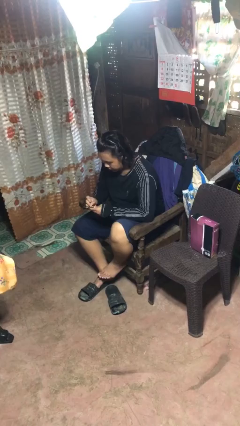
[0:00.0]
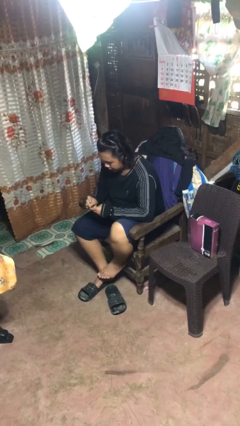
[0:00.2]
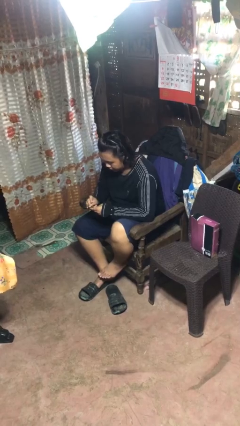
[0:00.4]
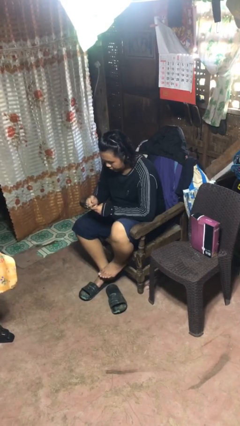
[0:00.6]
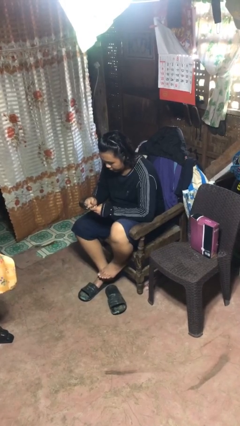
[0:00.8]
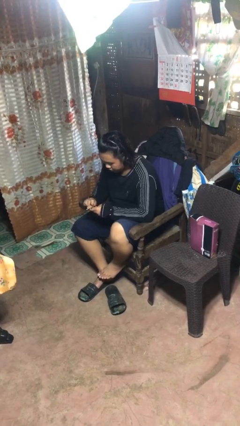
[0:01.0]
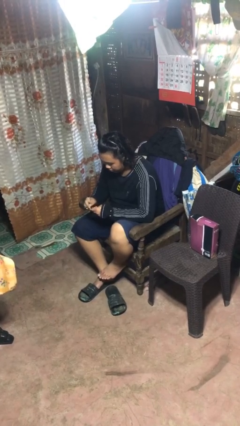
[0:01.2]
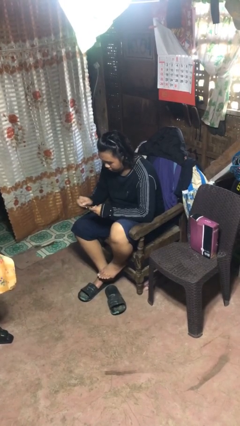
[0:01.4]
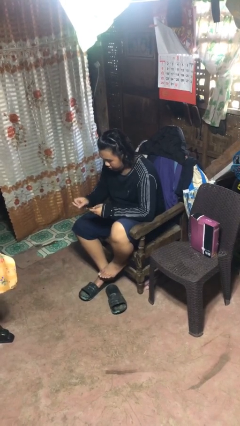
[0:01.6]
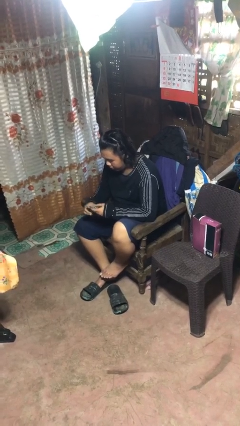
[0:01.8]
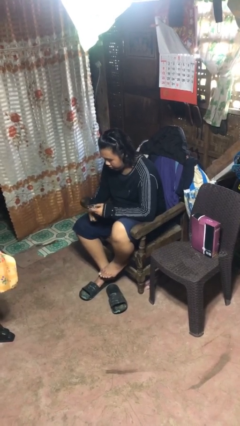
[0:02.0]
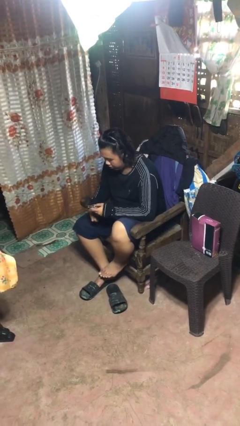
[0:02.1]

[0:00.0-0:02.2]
person files fingernails

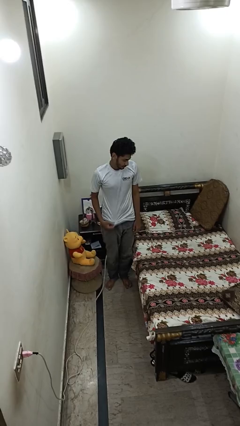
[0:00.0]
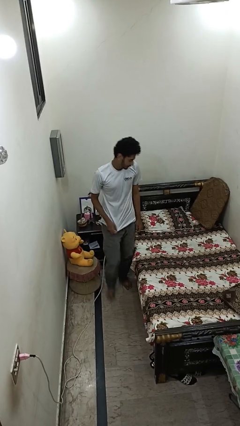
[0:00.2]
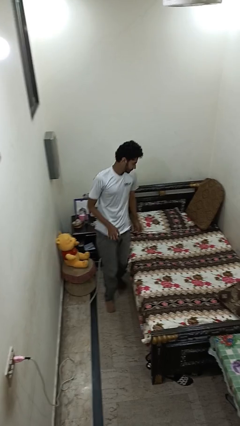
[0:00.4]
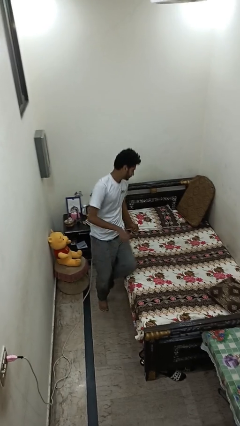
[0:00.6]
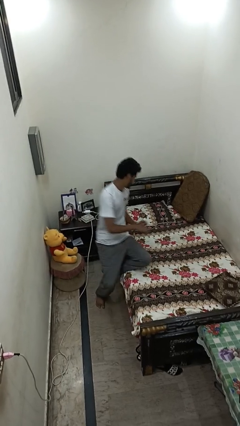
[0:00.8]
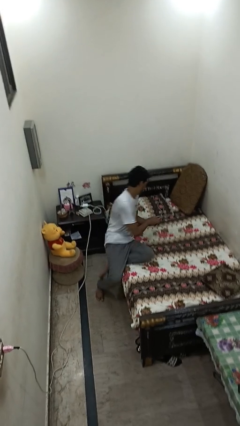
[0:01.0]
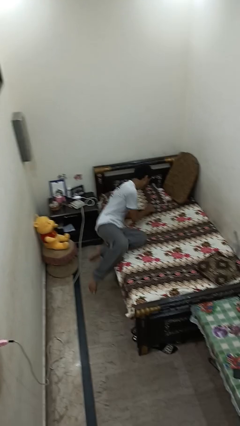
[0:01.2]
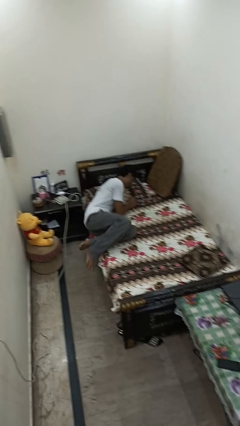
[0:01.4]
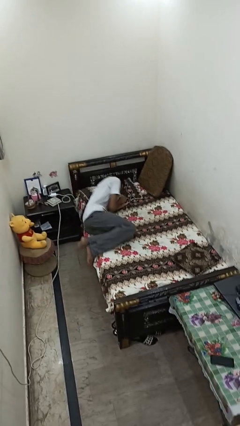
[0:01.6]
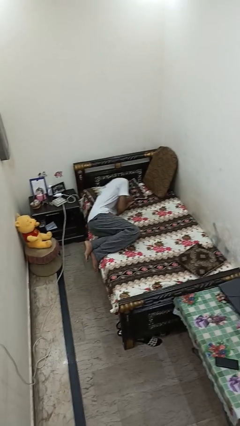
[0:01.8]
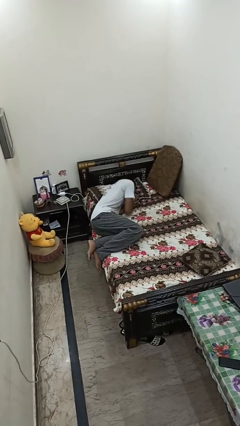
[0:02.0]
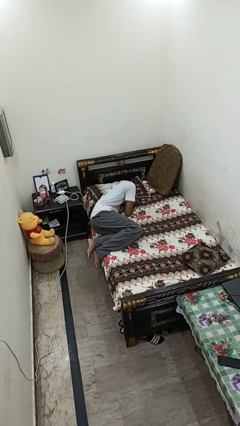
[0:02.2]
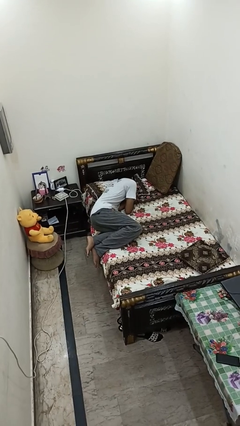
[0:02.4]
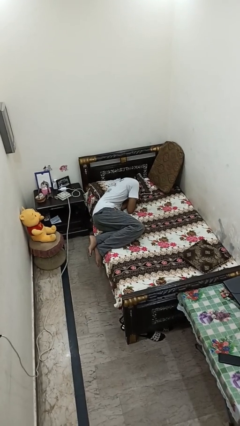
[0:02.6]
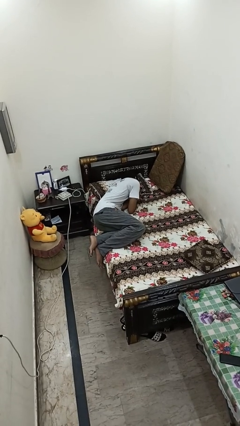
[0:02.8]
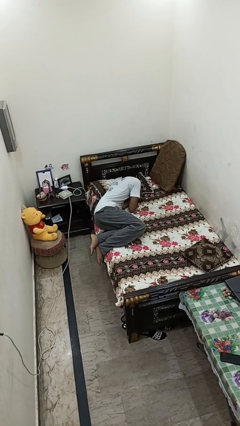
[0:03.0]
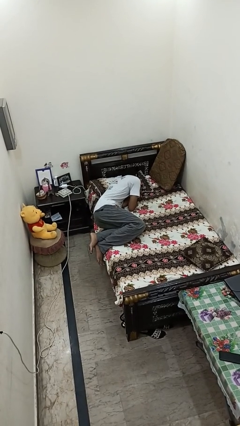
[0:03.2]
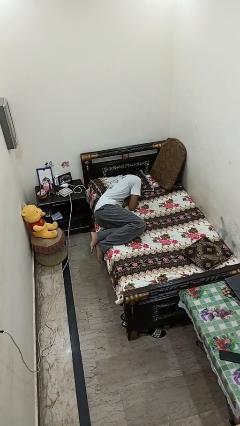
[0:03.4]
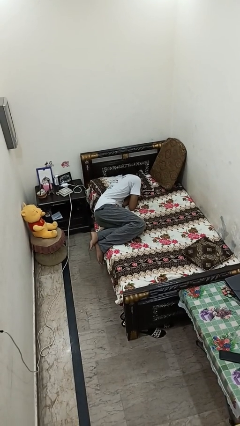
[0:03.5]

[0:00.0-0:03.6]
person lies down on bed

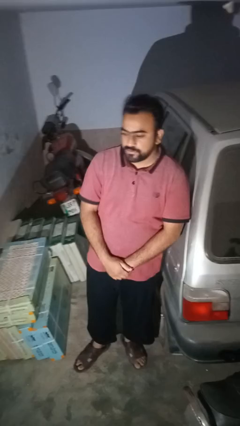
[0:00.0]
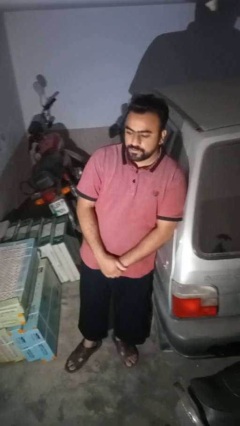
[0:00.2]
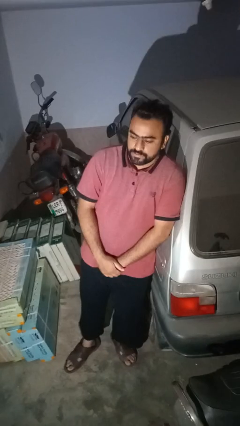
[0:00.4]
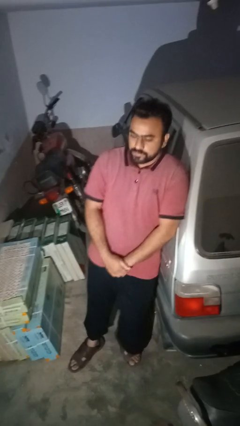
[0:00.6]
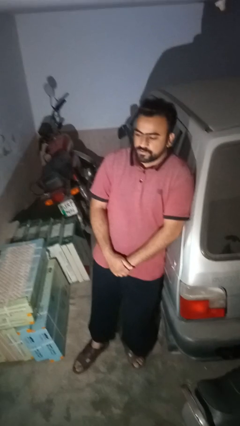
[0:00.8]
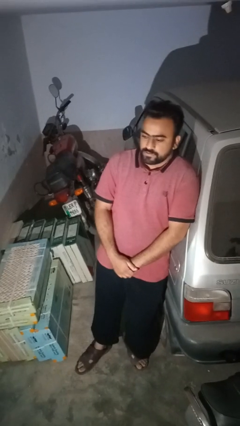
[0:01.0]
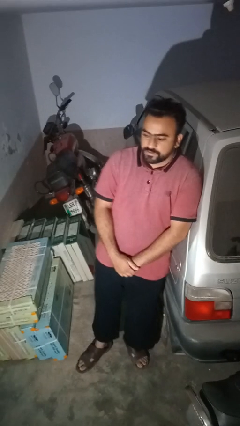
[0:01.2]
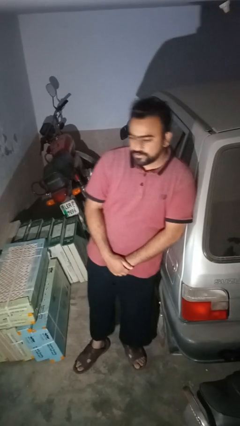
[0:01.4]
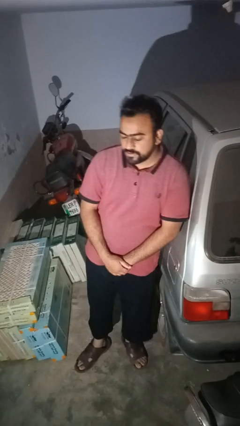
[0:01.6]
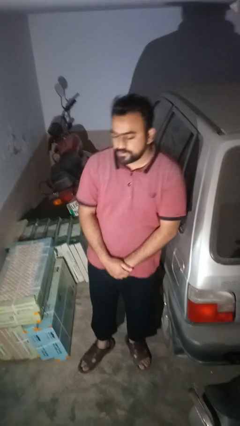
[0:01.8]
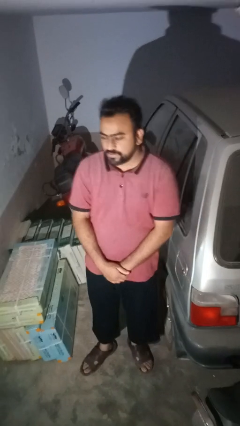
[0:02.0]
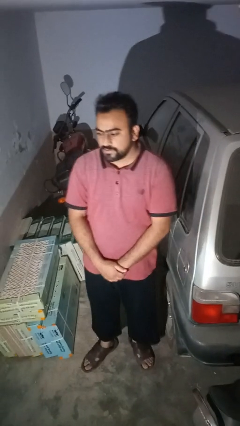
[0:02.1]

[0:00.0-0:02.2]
person leans against car

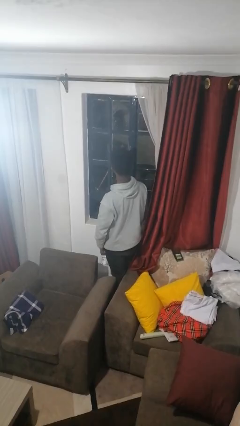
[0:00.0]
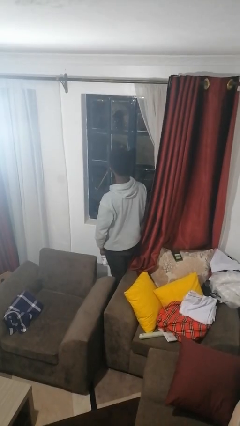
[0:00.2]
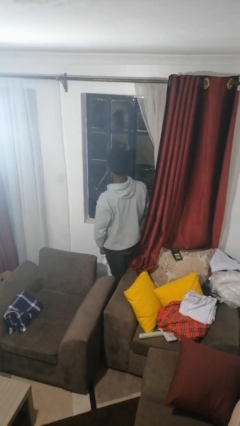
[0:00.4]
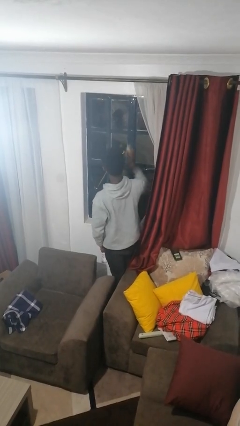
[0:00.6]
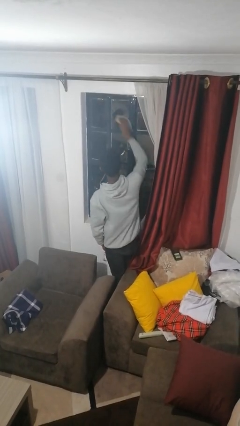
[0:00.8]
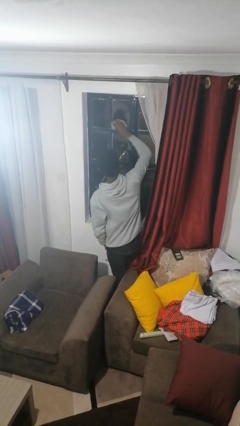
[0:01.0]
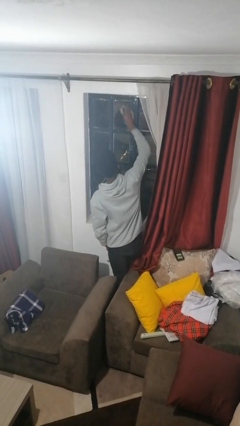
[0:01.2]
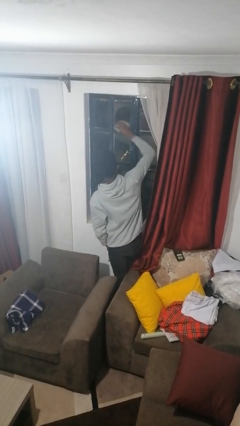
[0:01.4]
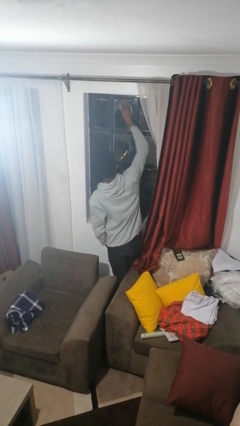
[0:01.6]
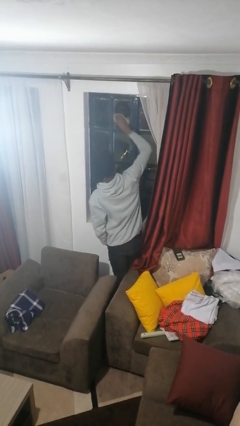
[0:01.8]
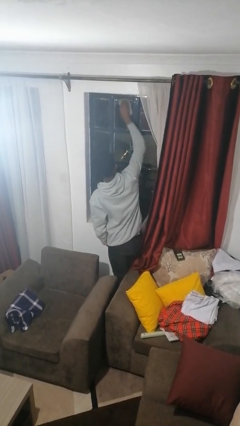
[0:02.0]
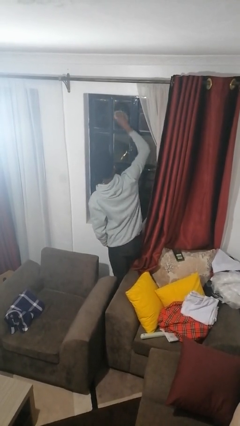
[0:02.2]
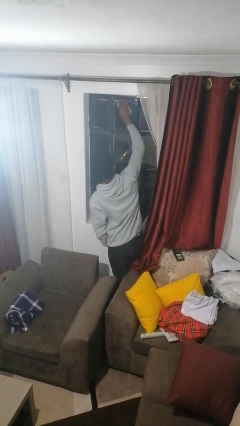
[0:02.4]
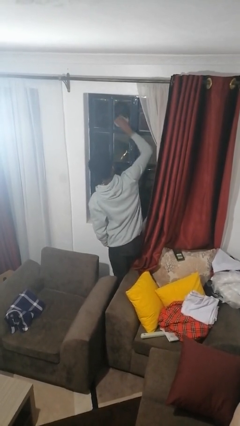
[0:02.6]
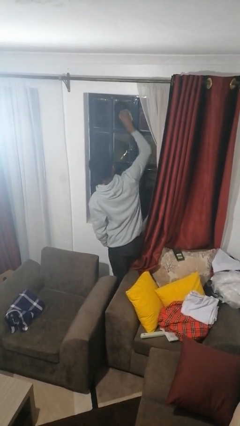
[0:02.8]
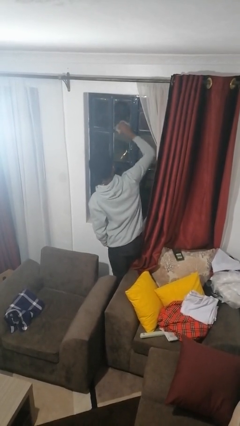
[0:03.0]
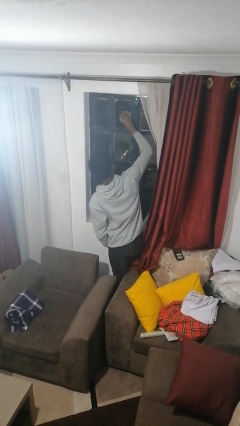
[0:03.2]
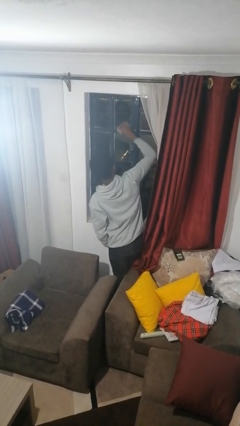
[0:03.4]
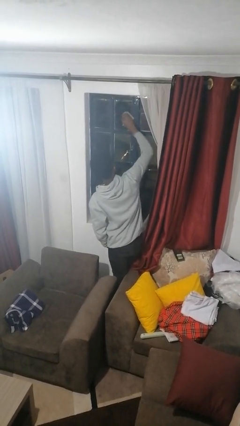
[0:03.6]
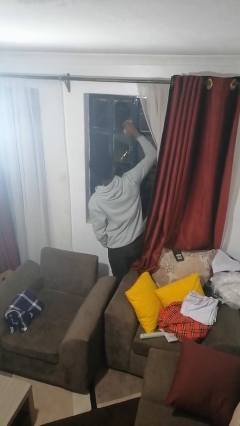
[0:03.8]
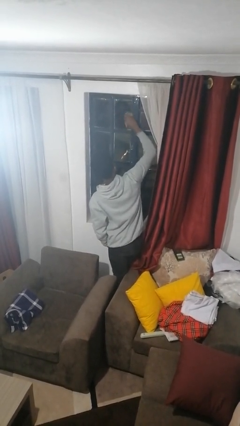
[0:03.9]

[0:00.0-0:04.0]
person washes window

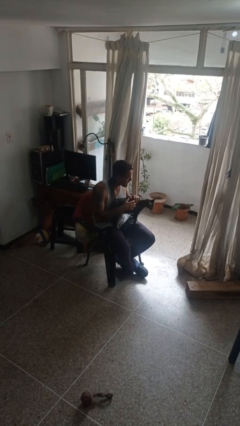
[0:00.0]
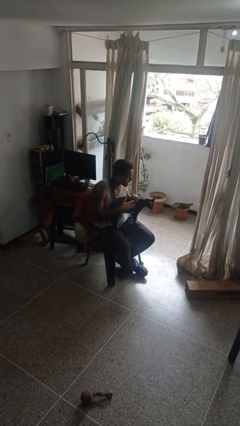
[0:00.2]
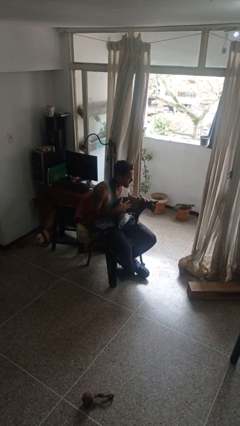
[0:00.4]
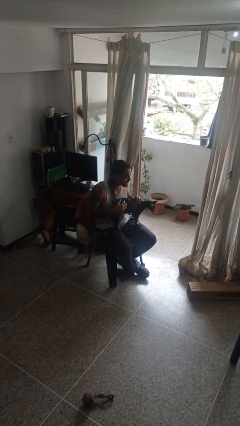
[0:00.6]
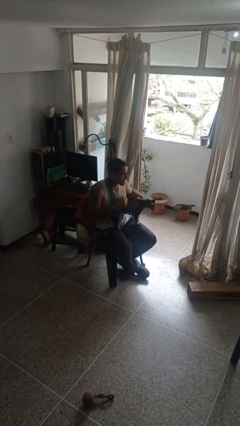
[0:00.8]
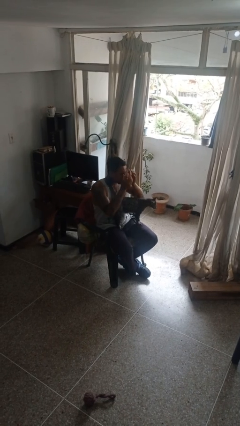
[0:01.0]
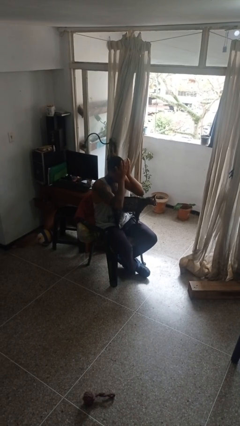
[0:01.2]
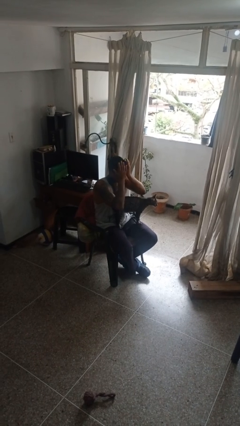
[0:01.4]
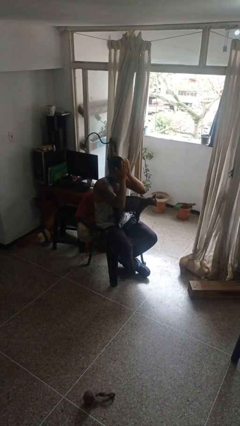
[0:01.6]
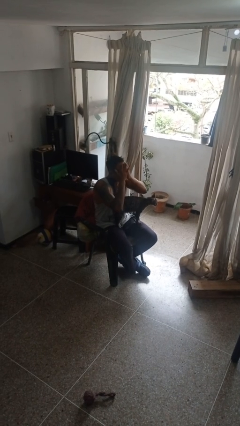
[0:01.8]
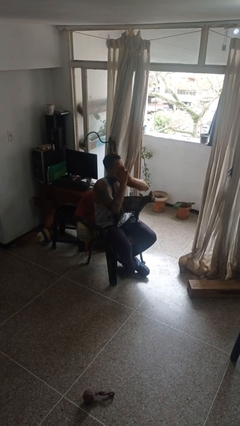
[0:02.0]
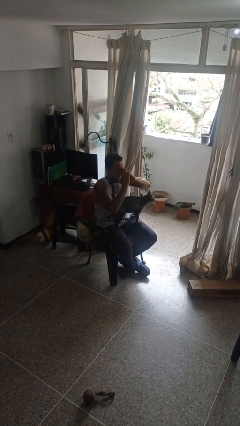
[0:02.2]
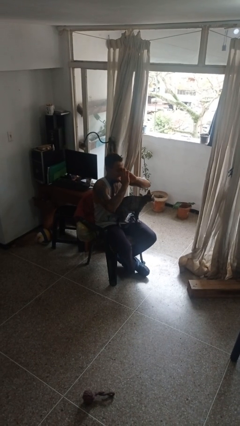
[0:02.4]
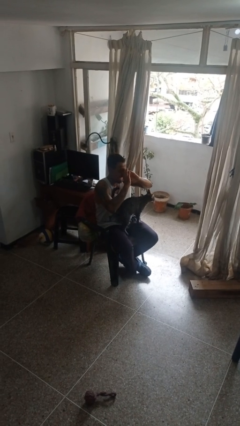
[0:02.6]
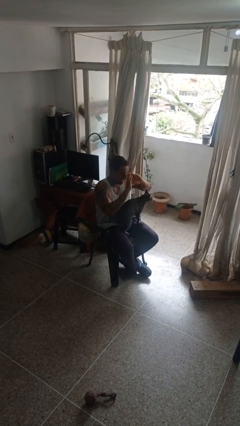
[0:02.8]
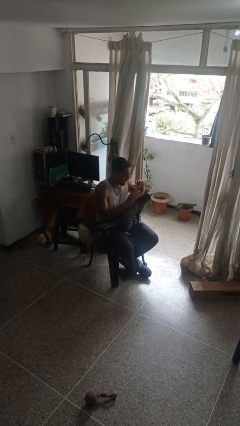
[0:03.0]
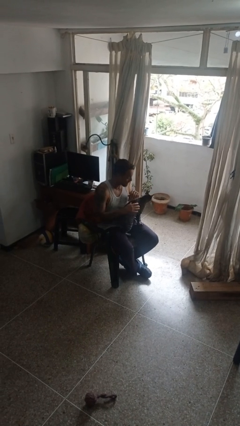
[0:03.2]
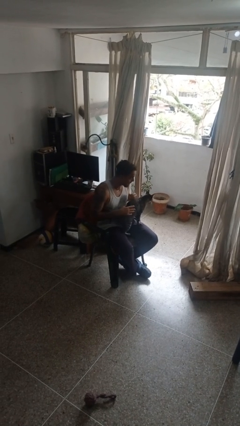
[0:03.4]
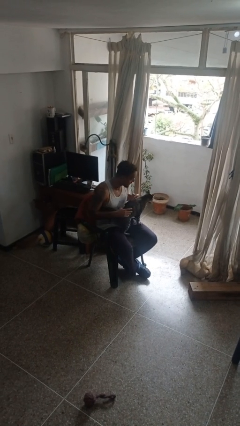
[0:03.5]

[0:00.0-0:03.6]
person rubs eyes

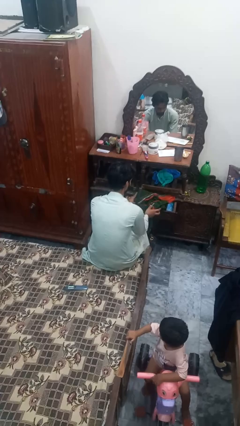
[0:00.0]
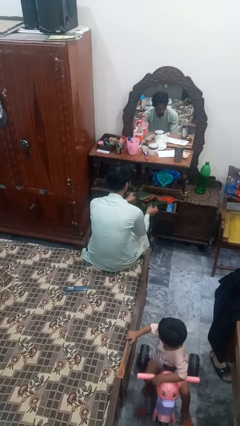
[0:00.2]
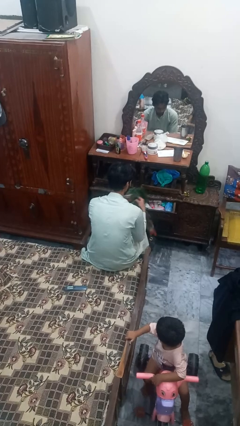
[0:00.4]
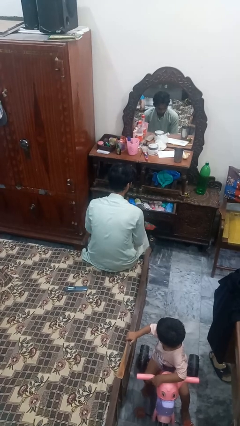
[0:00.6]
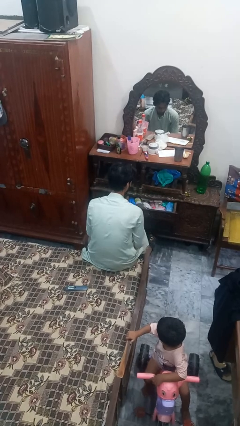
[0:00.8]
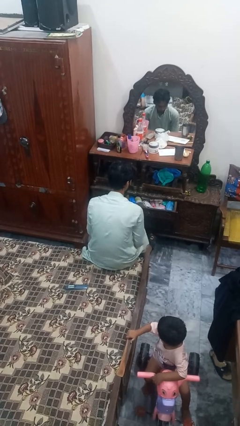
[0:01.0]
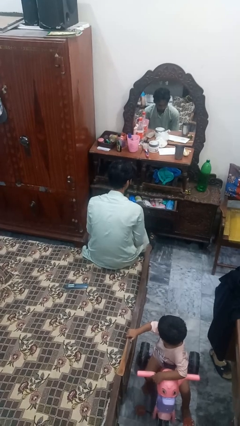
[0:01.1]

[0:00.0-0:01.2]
person takes clothes from dresser

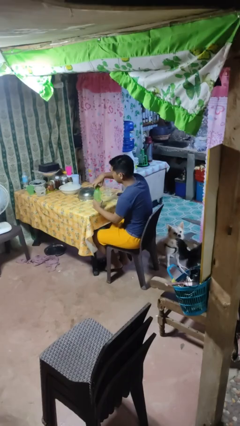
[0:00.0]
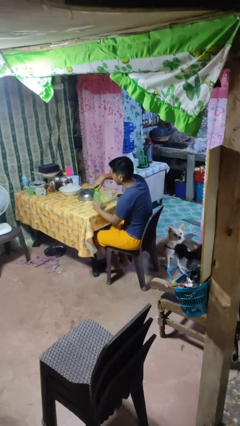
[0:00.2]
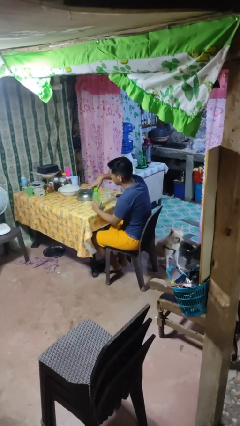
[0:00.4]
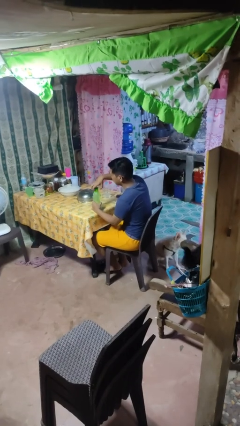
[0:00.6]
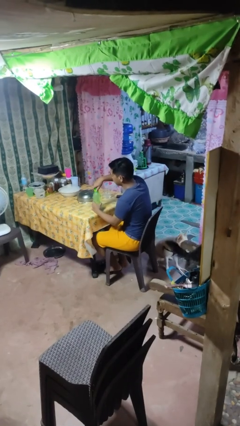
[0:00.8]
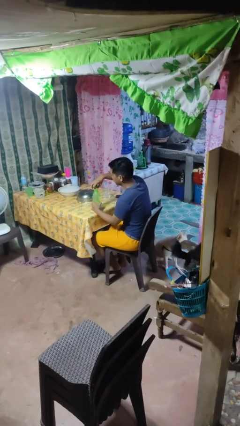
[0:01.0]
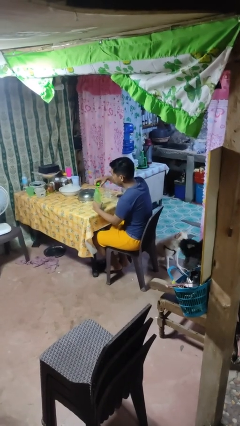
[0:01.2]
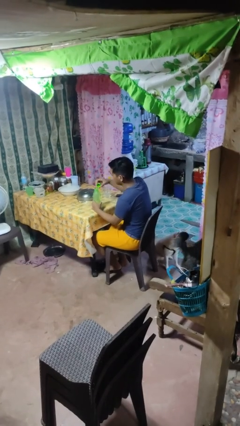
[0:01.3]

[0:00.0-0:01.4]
person unscrews lid from bottle
